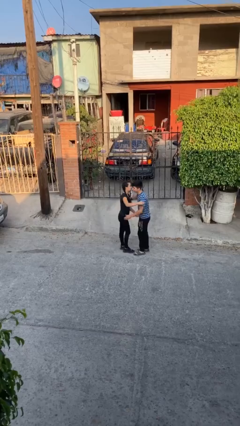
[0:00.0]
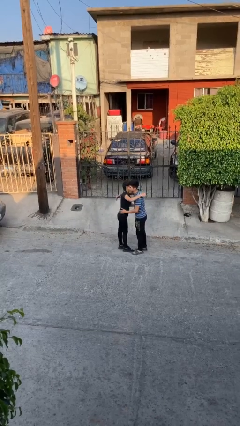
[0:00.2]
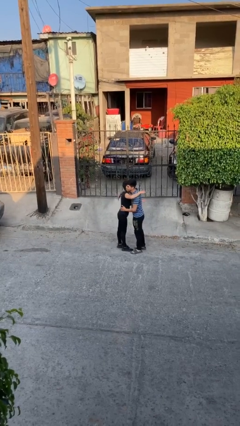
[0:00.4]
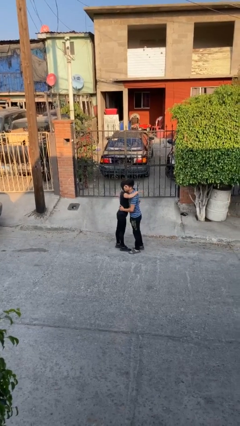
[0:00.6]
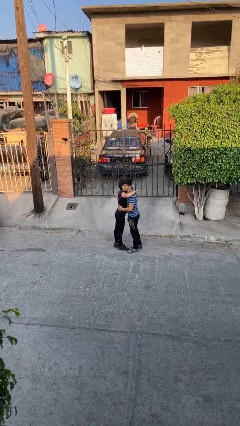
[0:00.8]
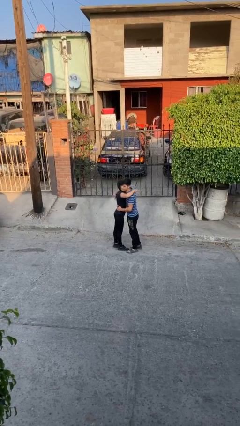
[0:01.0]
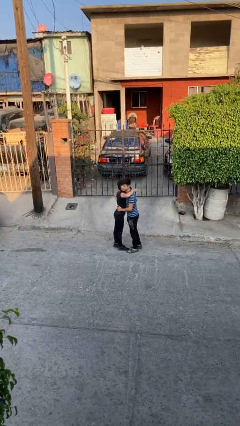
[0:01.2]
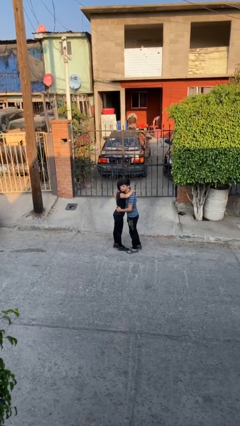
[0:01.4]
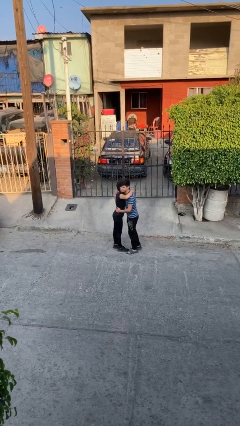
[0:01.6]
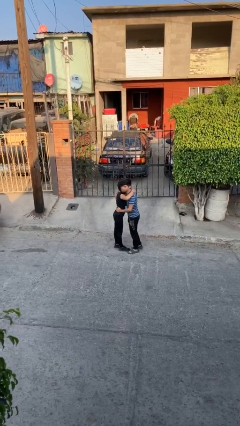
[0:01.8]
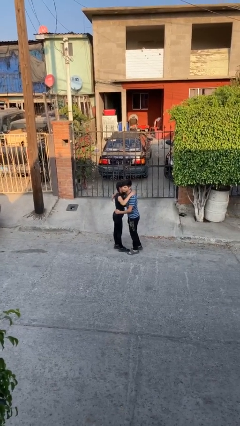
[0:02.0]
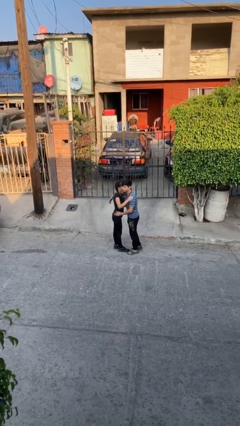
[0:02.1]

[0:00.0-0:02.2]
person embraces person

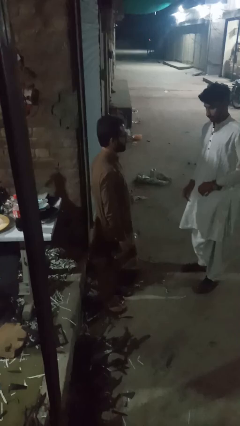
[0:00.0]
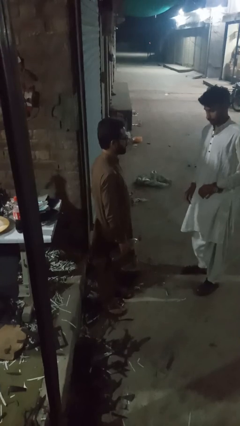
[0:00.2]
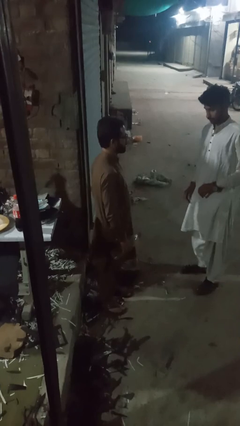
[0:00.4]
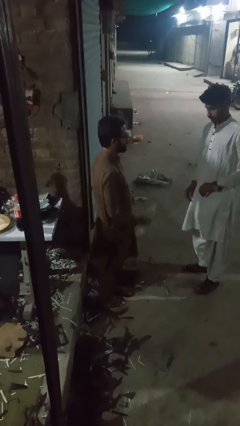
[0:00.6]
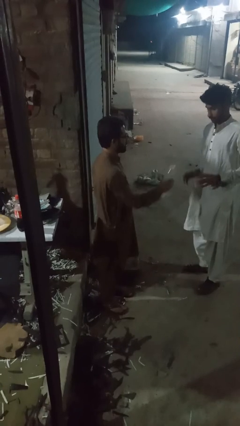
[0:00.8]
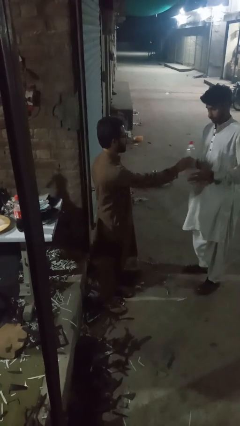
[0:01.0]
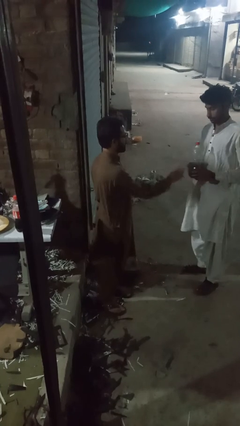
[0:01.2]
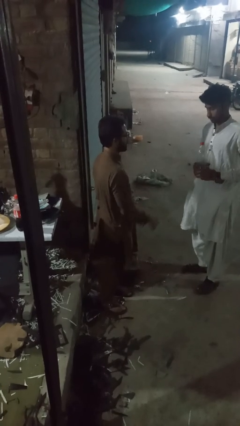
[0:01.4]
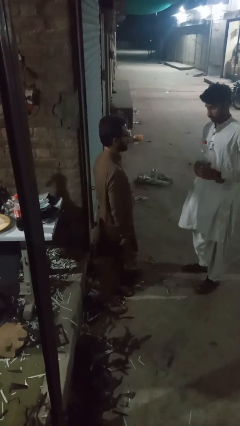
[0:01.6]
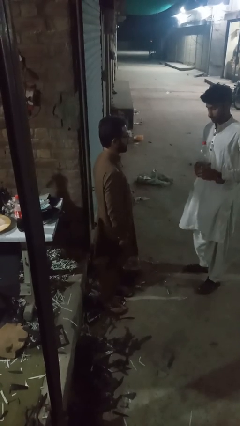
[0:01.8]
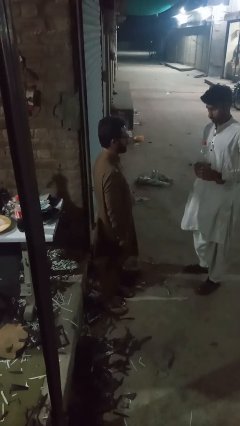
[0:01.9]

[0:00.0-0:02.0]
person throws object to person

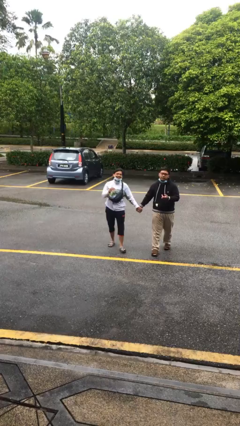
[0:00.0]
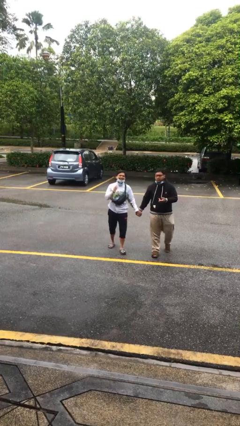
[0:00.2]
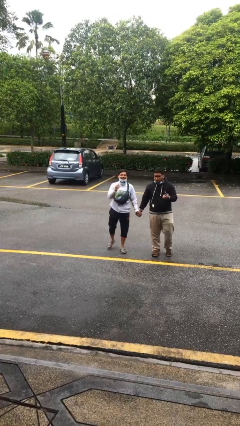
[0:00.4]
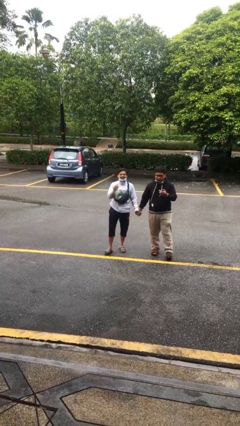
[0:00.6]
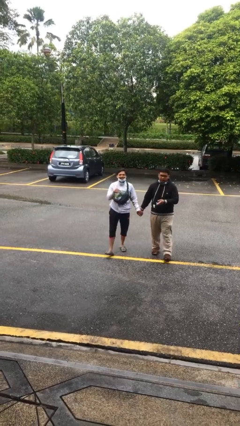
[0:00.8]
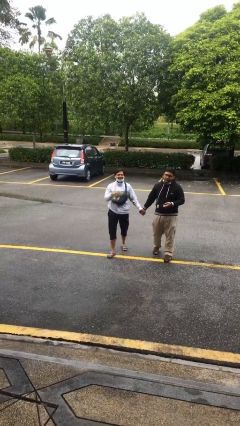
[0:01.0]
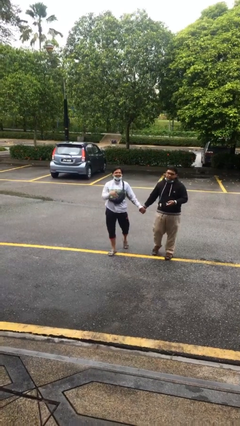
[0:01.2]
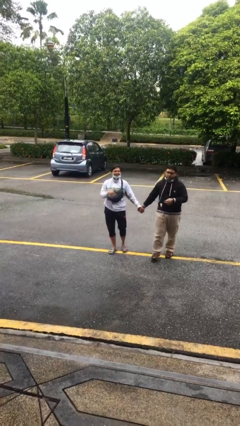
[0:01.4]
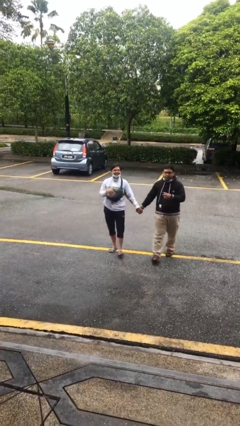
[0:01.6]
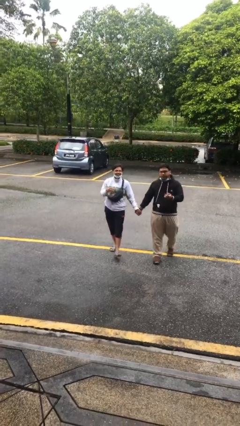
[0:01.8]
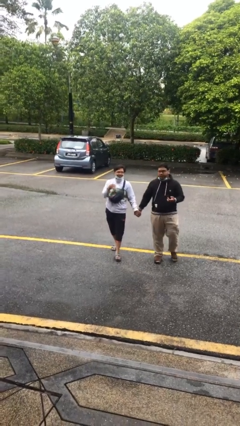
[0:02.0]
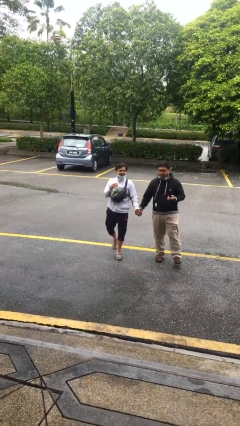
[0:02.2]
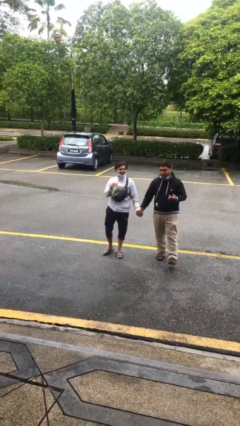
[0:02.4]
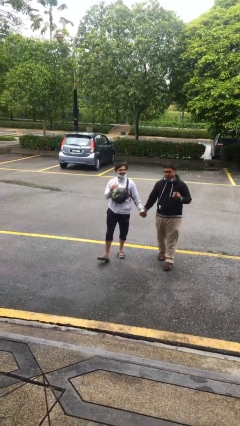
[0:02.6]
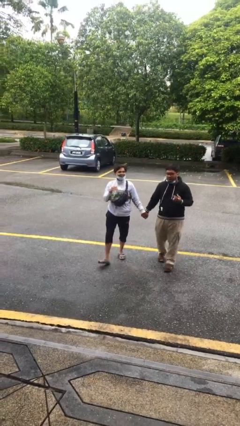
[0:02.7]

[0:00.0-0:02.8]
person holds hand

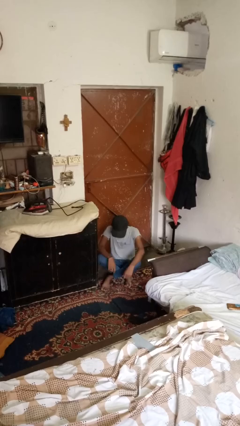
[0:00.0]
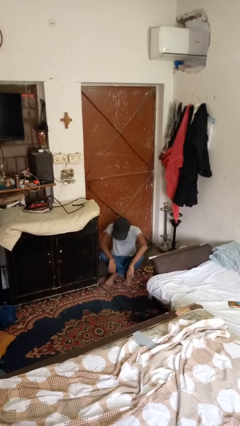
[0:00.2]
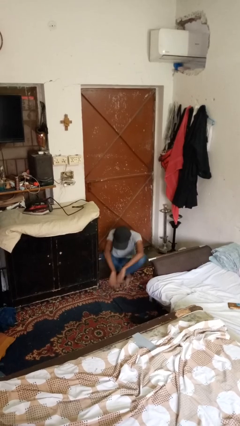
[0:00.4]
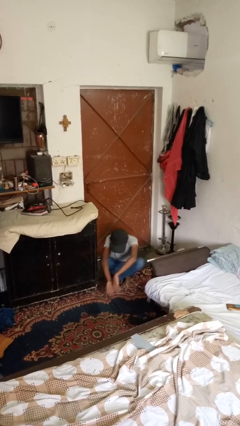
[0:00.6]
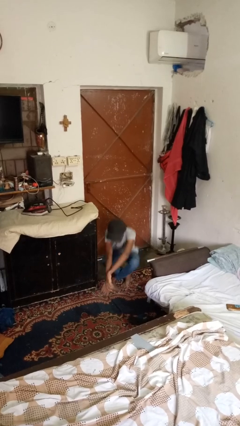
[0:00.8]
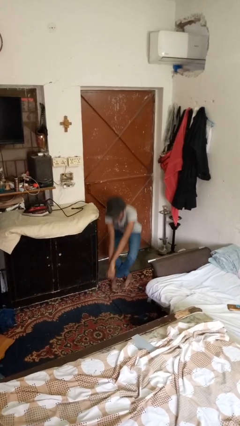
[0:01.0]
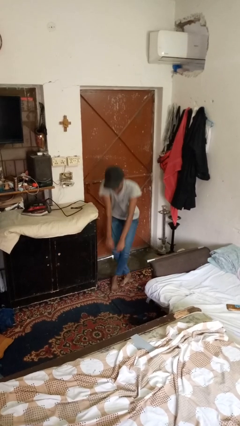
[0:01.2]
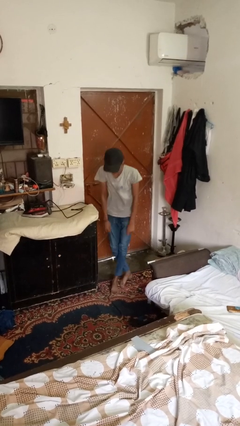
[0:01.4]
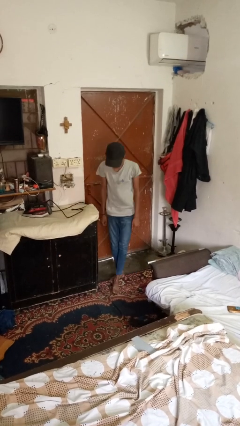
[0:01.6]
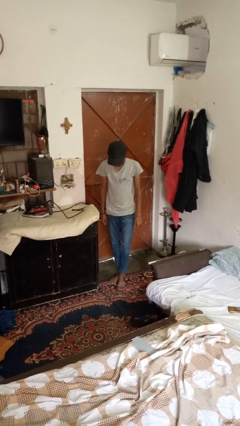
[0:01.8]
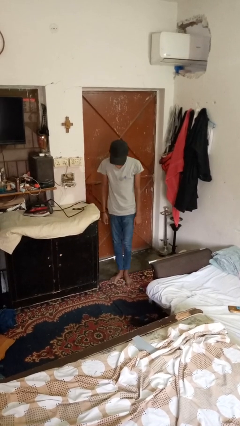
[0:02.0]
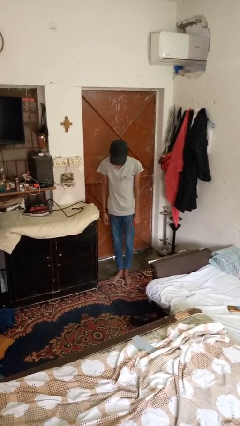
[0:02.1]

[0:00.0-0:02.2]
person stands up from floor

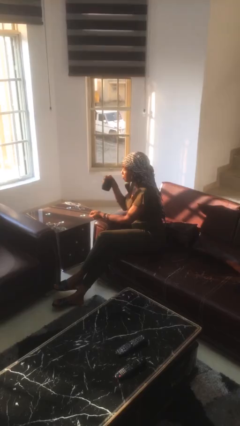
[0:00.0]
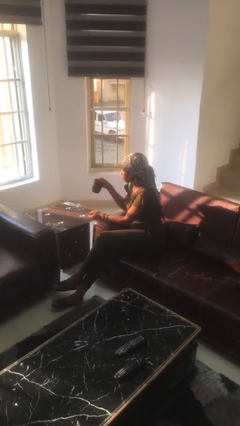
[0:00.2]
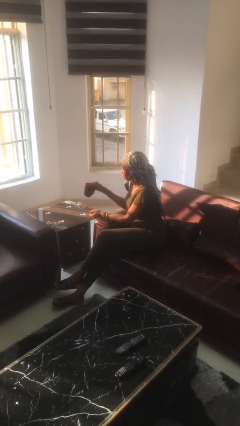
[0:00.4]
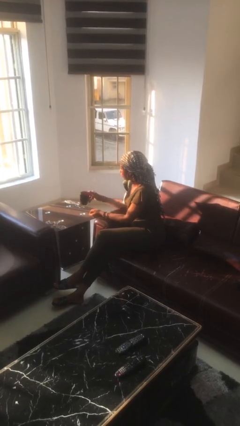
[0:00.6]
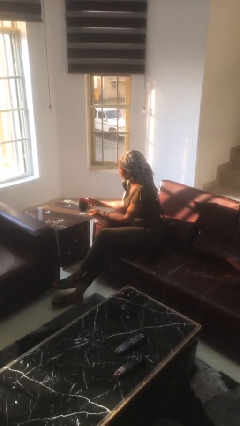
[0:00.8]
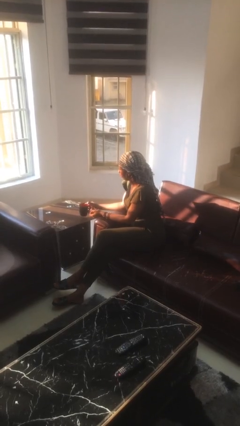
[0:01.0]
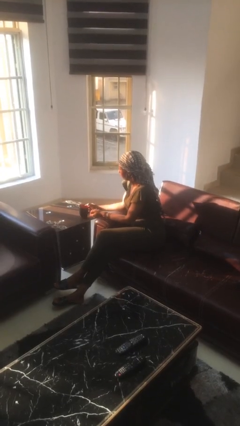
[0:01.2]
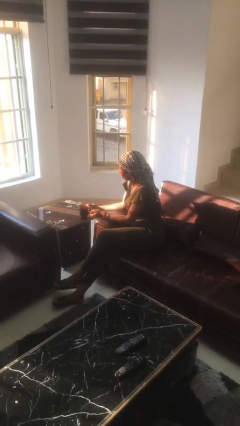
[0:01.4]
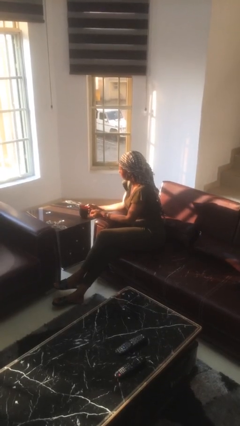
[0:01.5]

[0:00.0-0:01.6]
person puts down object on table

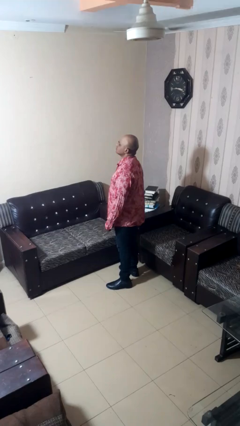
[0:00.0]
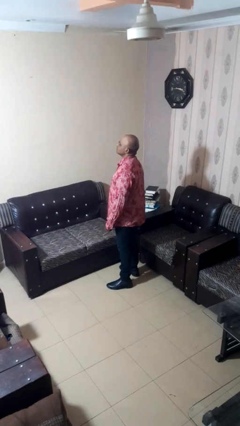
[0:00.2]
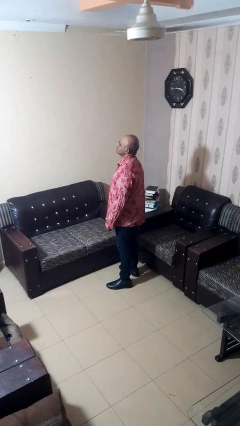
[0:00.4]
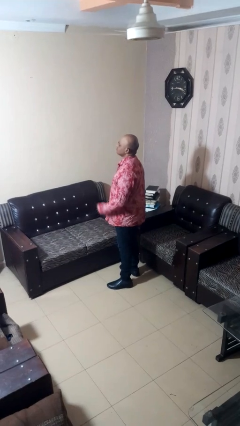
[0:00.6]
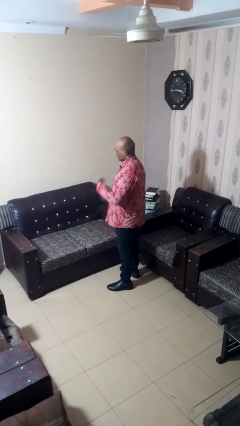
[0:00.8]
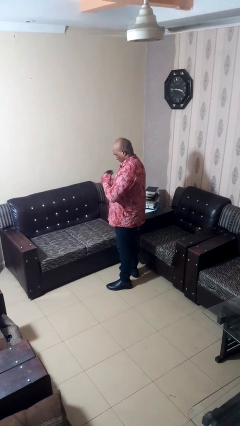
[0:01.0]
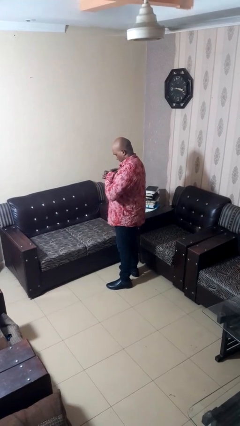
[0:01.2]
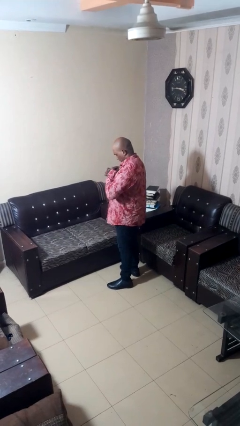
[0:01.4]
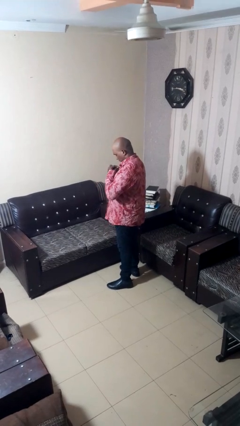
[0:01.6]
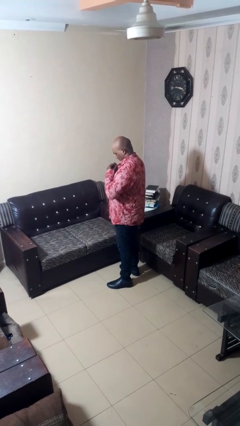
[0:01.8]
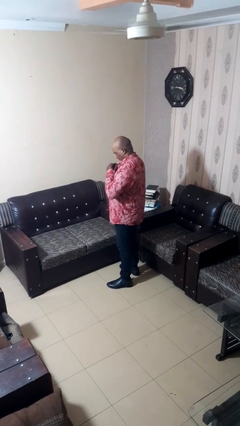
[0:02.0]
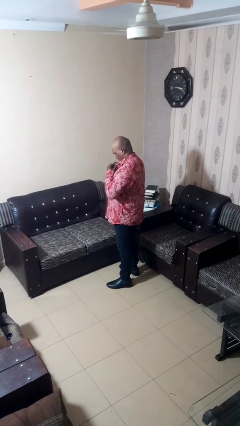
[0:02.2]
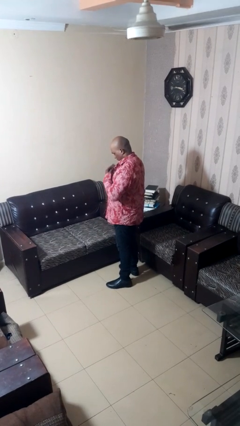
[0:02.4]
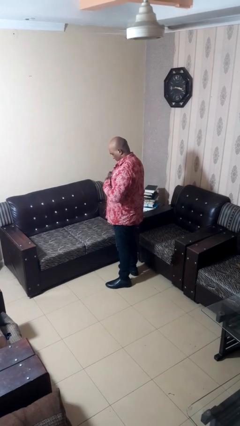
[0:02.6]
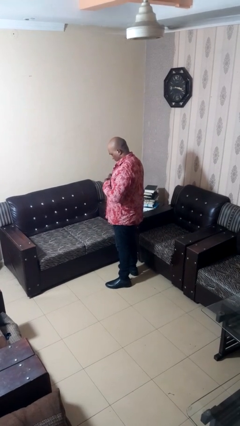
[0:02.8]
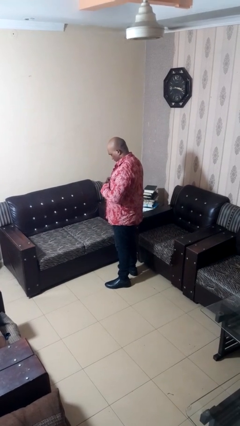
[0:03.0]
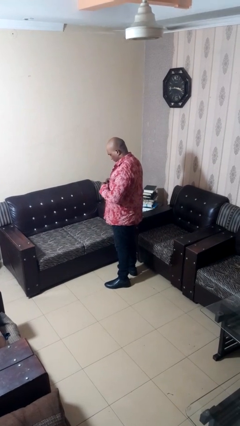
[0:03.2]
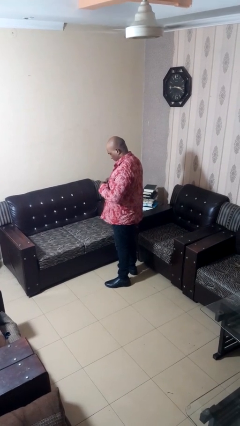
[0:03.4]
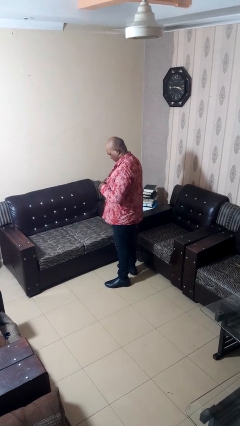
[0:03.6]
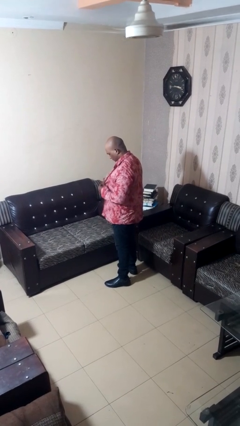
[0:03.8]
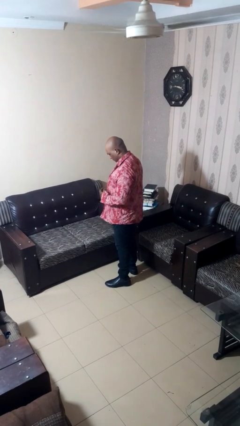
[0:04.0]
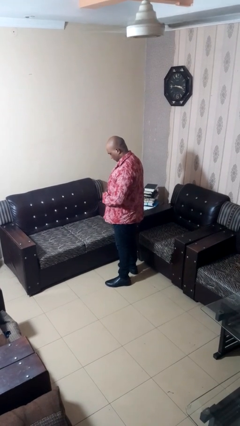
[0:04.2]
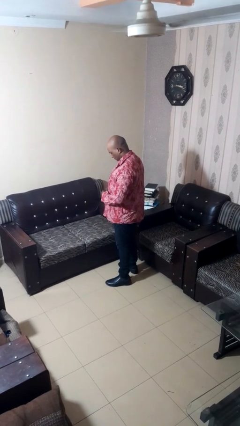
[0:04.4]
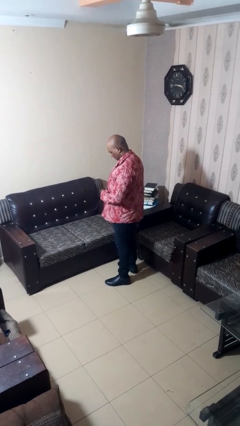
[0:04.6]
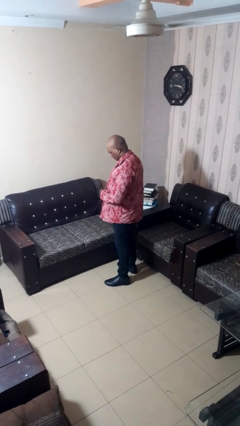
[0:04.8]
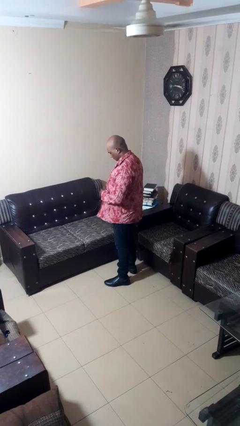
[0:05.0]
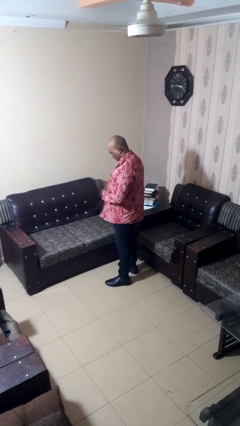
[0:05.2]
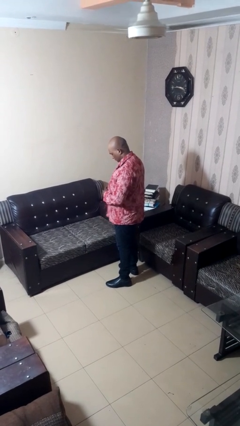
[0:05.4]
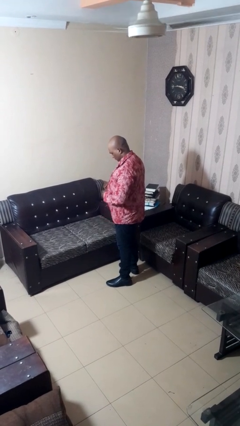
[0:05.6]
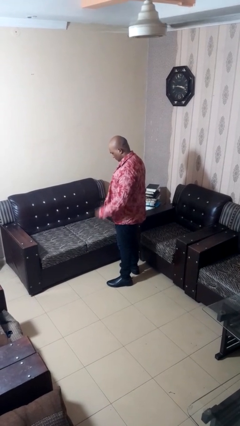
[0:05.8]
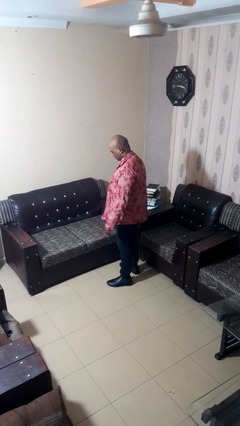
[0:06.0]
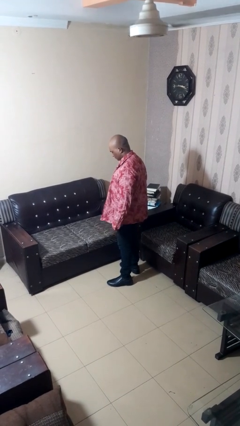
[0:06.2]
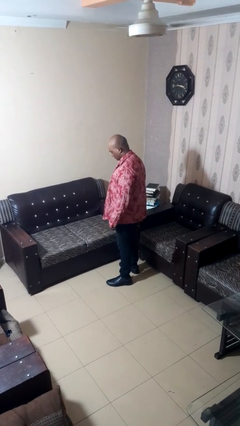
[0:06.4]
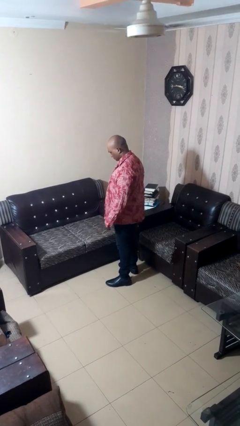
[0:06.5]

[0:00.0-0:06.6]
person unbuttons shirt
